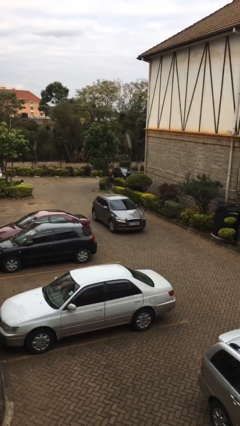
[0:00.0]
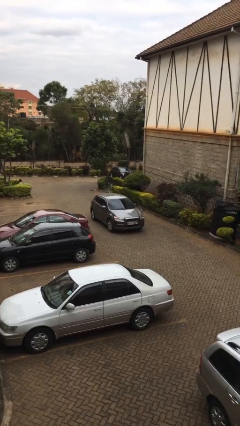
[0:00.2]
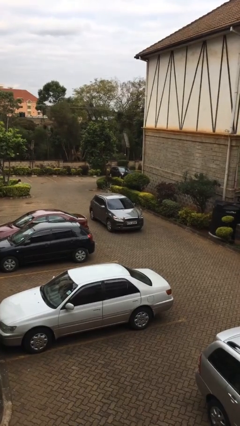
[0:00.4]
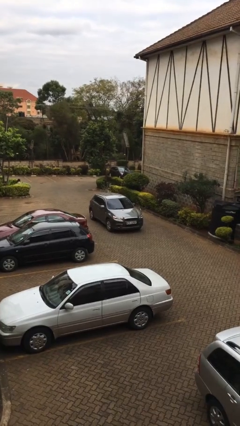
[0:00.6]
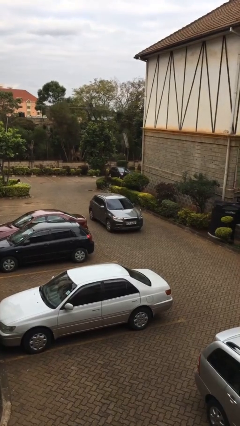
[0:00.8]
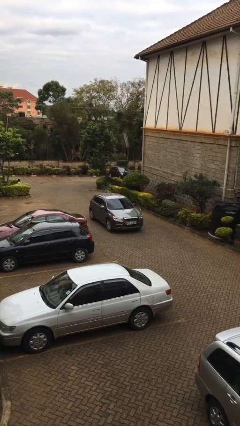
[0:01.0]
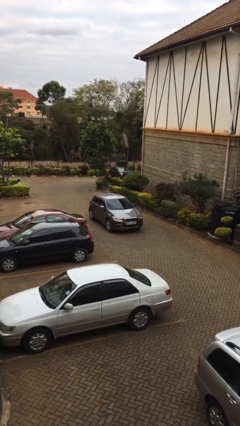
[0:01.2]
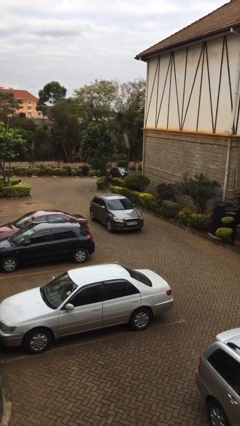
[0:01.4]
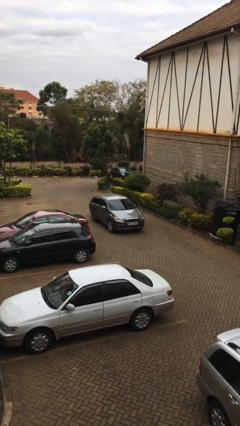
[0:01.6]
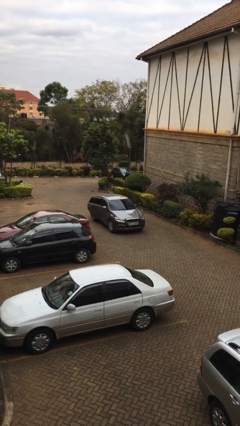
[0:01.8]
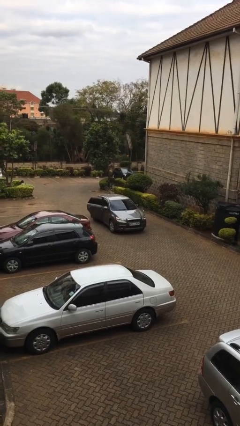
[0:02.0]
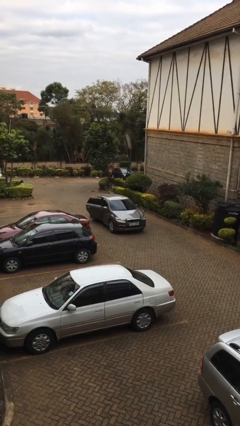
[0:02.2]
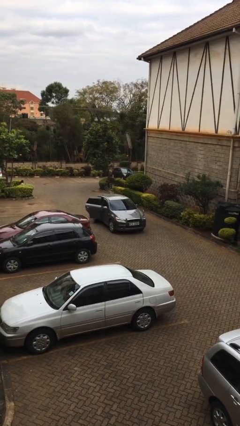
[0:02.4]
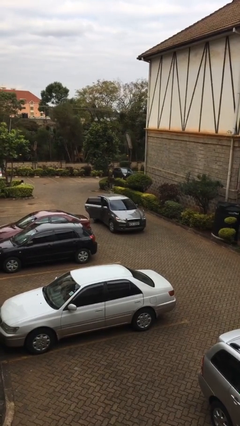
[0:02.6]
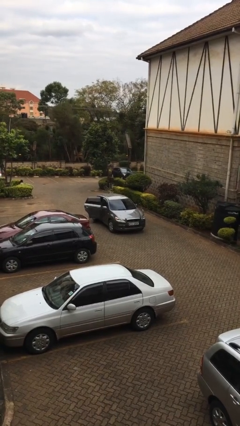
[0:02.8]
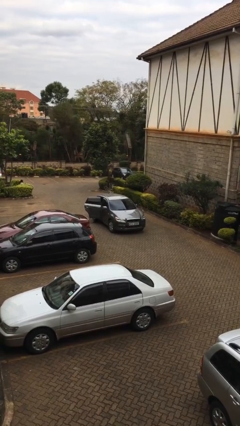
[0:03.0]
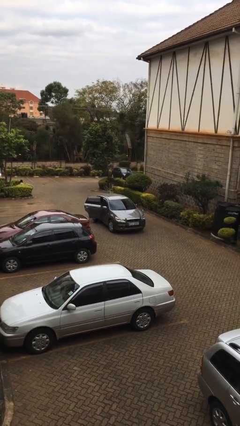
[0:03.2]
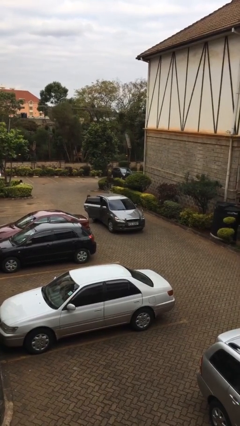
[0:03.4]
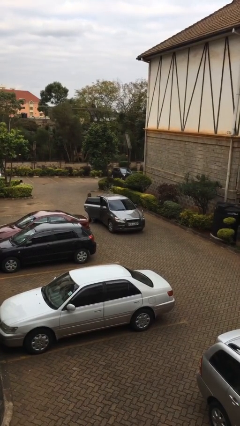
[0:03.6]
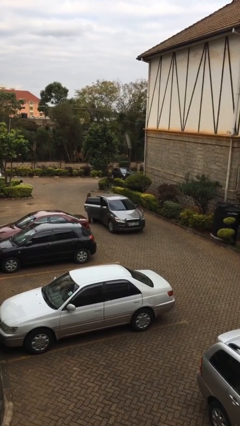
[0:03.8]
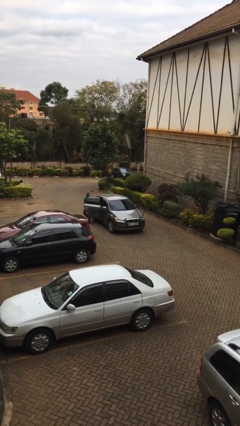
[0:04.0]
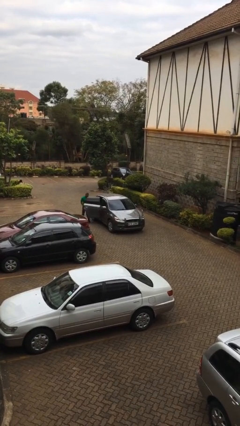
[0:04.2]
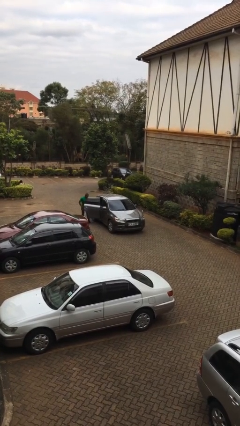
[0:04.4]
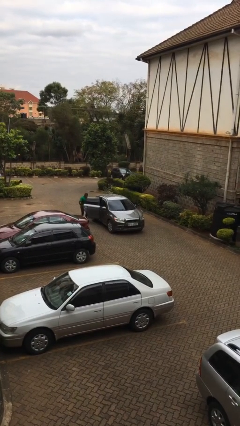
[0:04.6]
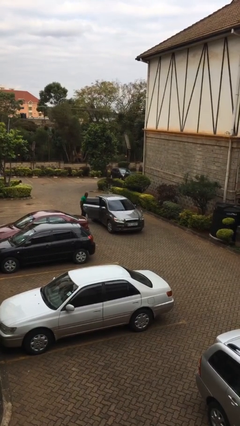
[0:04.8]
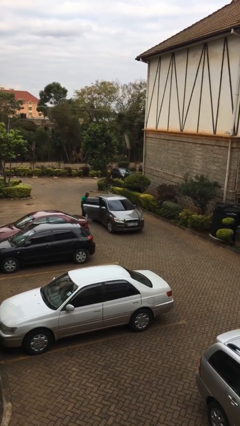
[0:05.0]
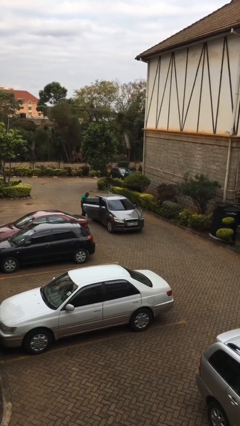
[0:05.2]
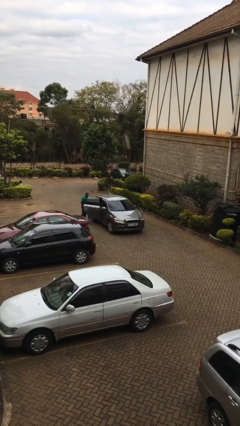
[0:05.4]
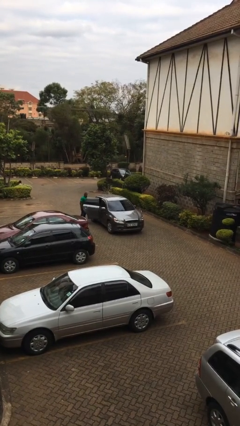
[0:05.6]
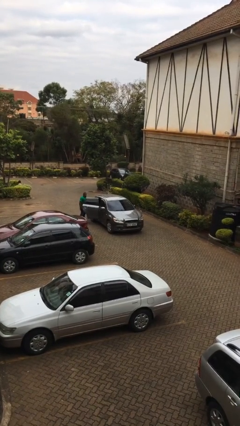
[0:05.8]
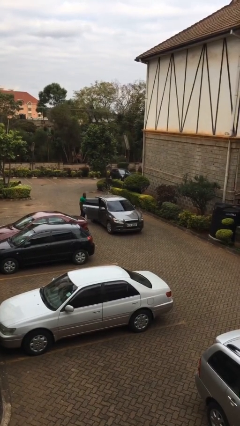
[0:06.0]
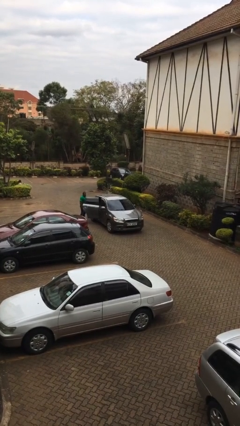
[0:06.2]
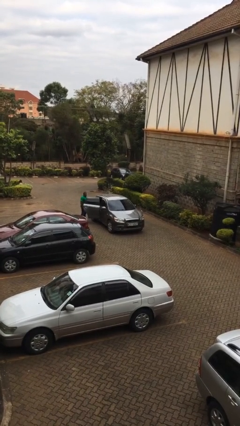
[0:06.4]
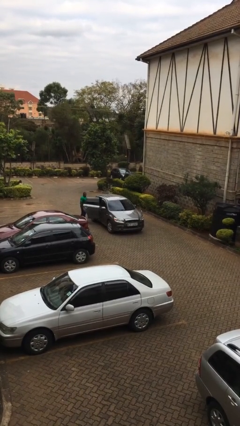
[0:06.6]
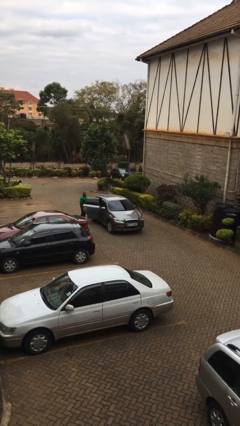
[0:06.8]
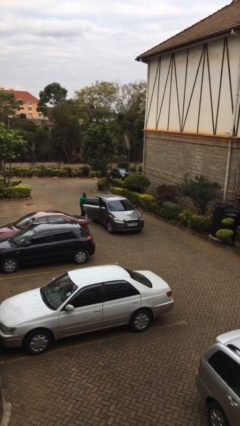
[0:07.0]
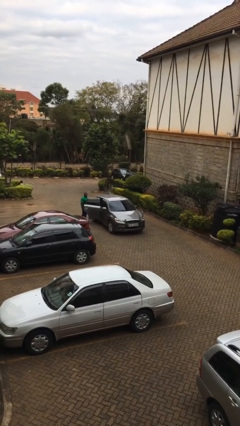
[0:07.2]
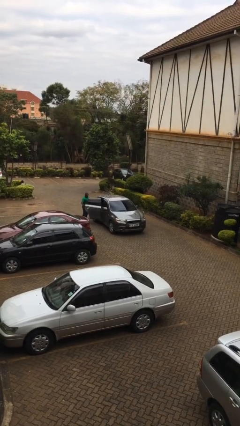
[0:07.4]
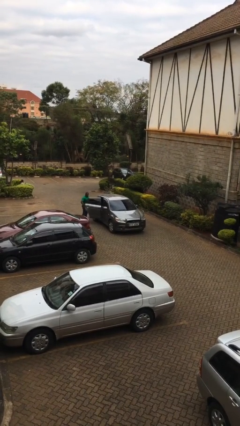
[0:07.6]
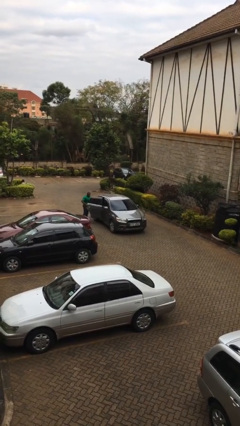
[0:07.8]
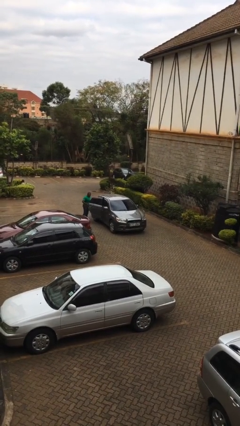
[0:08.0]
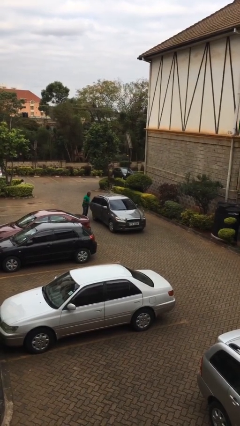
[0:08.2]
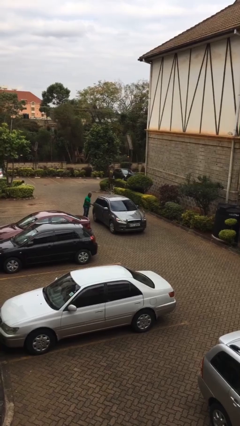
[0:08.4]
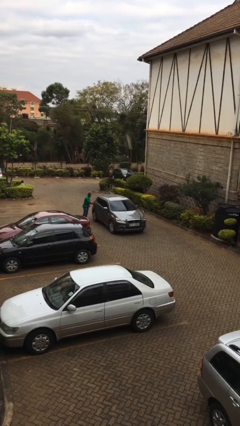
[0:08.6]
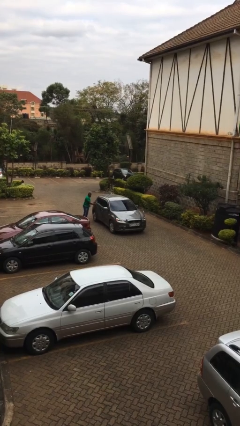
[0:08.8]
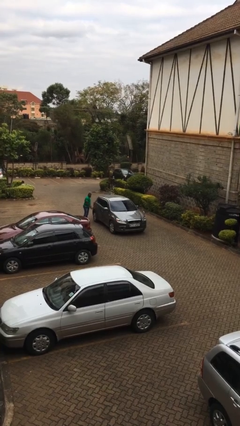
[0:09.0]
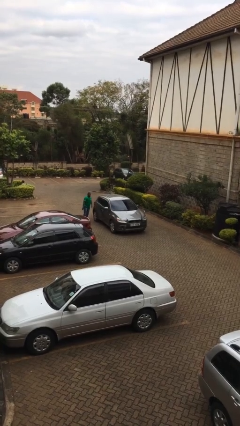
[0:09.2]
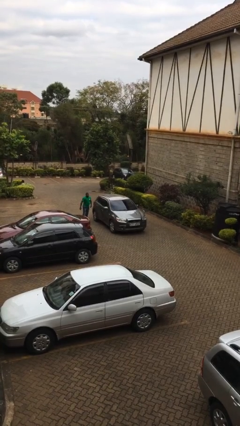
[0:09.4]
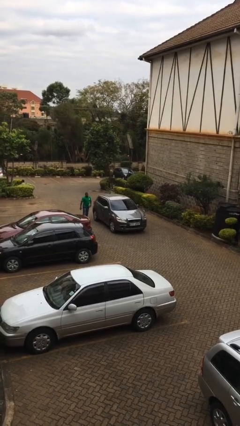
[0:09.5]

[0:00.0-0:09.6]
car drops off person

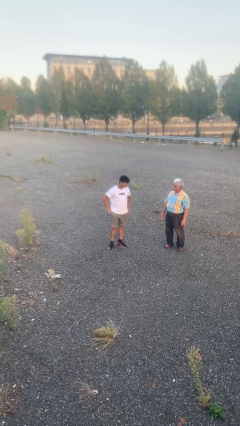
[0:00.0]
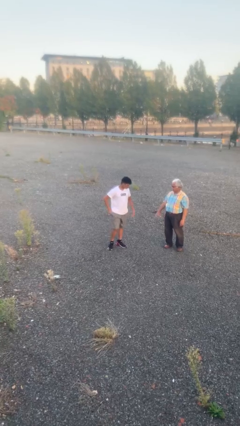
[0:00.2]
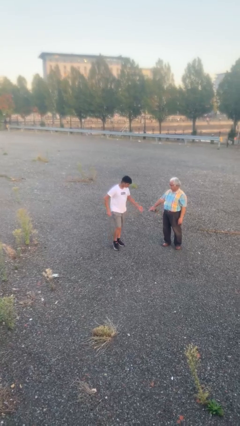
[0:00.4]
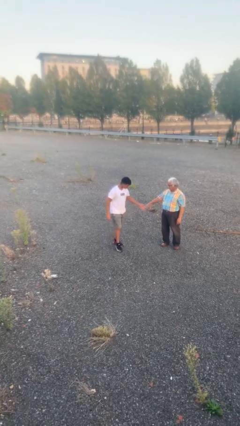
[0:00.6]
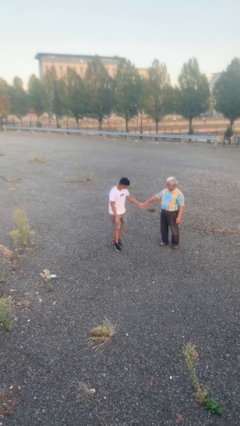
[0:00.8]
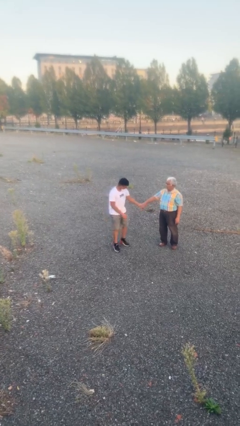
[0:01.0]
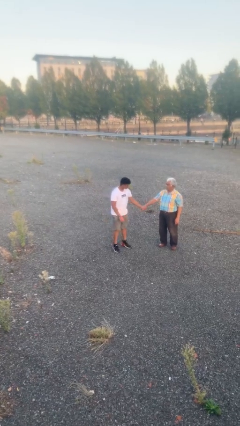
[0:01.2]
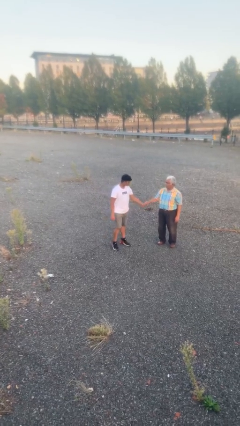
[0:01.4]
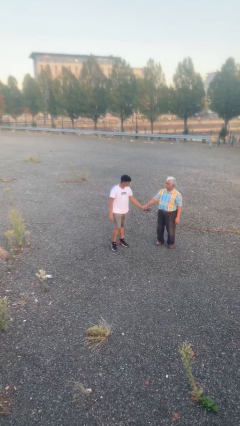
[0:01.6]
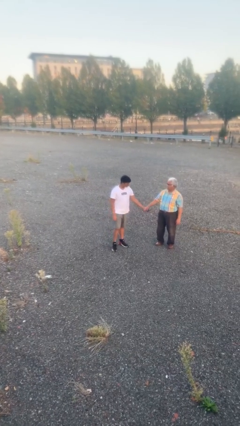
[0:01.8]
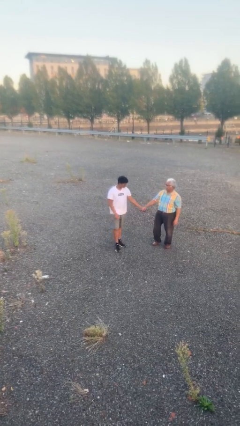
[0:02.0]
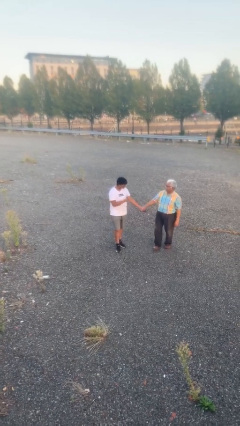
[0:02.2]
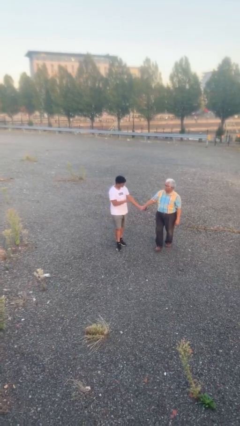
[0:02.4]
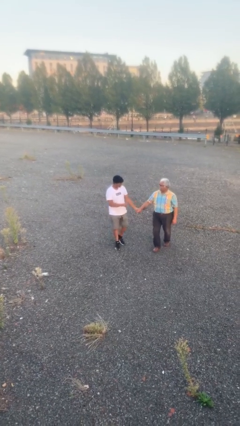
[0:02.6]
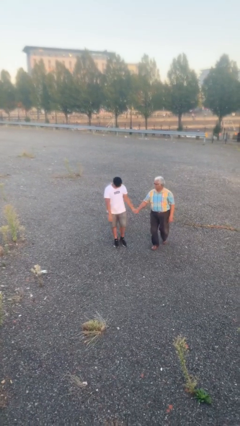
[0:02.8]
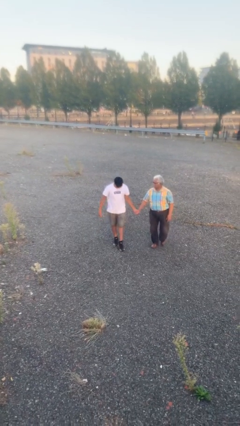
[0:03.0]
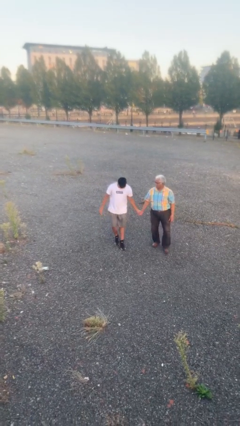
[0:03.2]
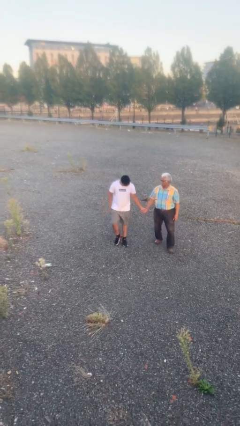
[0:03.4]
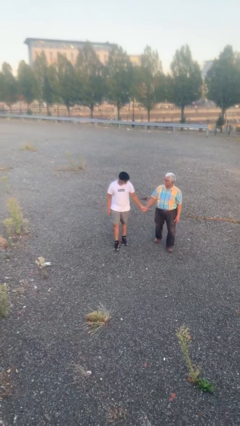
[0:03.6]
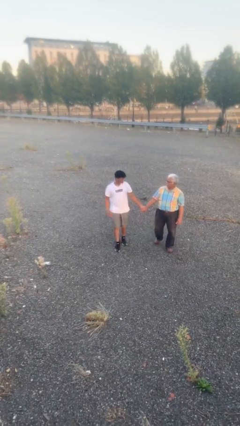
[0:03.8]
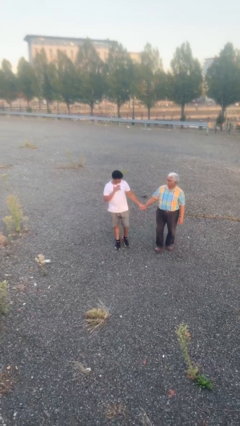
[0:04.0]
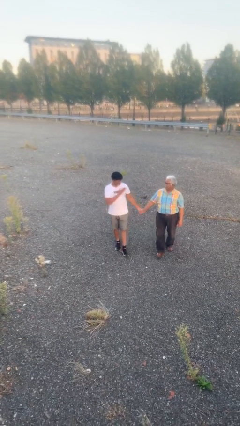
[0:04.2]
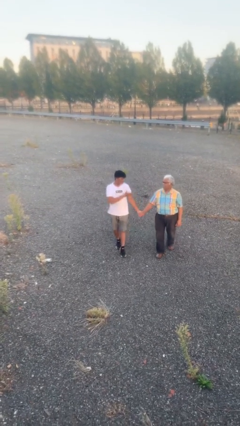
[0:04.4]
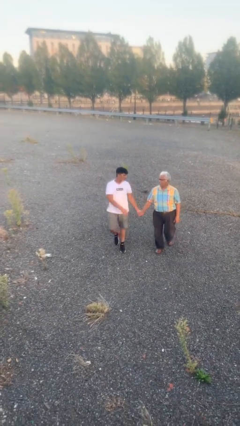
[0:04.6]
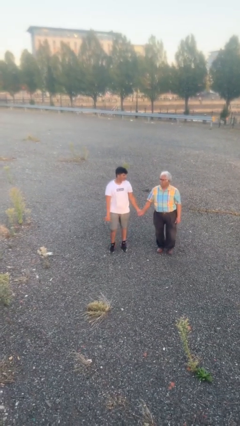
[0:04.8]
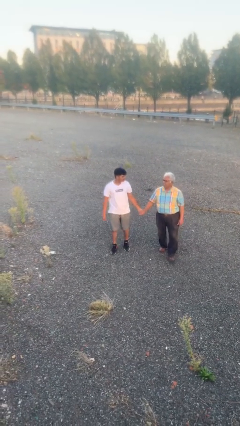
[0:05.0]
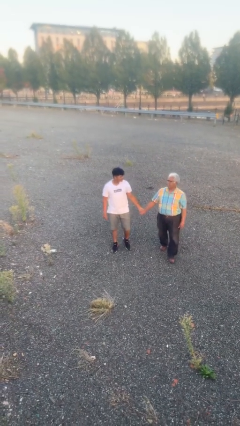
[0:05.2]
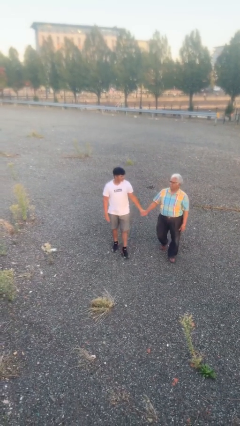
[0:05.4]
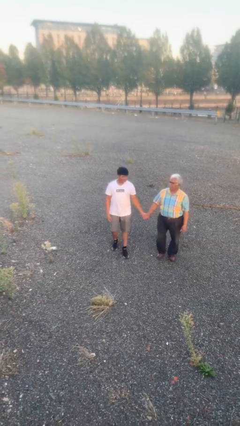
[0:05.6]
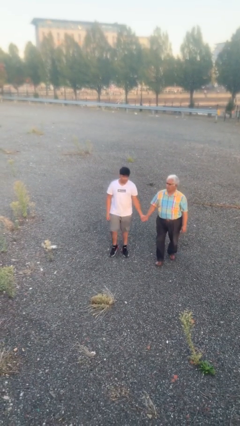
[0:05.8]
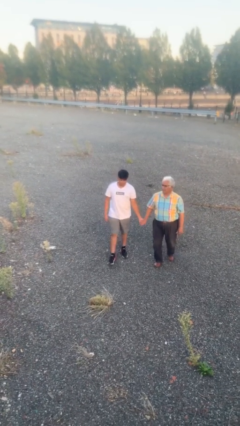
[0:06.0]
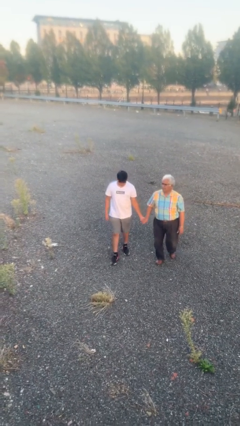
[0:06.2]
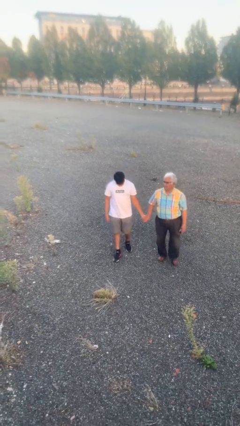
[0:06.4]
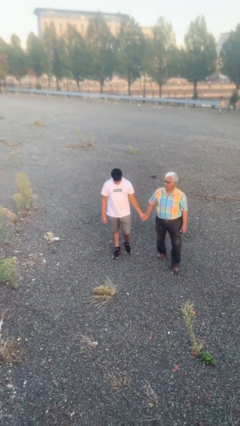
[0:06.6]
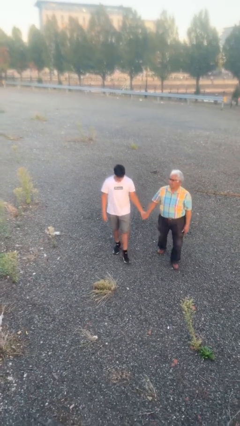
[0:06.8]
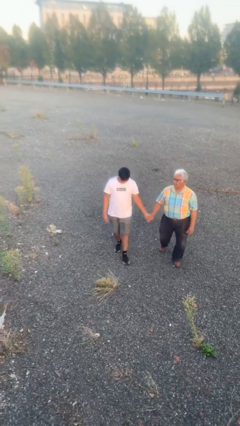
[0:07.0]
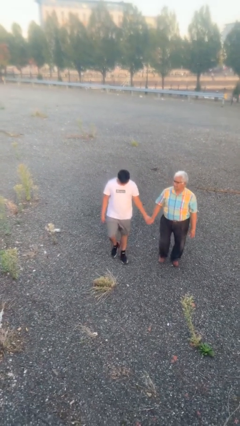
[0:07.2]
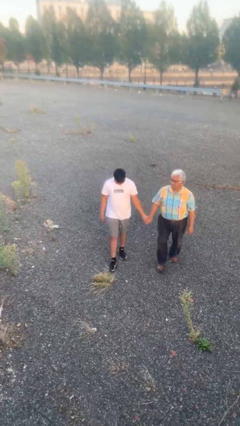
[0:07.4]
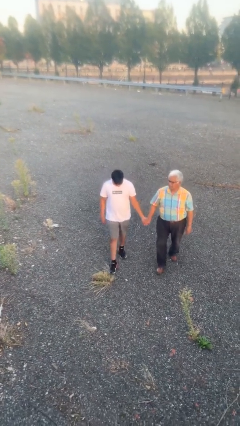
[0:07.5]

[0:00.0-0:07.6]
person holds hand

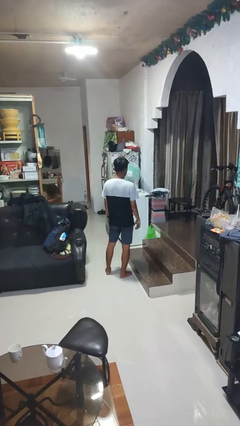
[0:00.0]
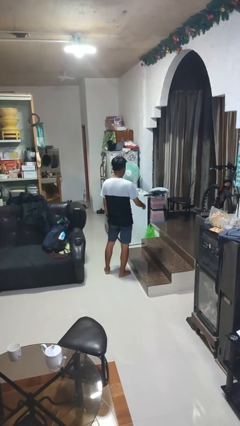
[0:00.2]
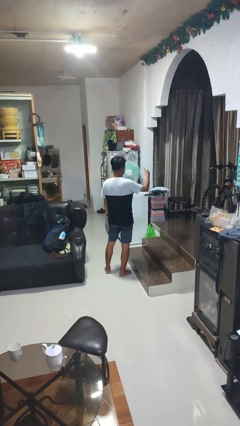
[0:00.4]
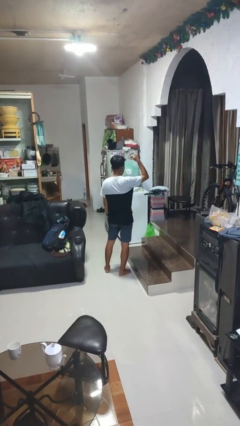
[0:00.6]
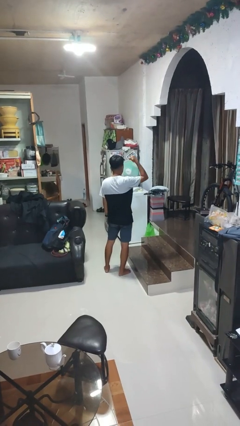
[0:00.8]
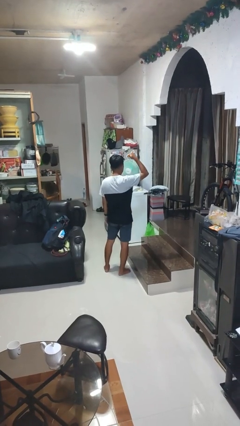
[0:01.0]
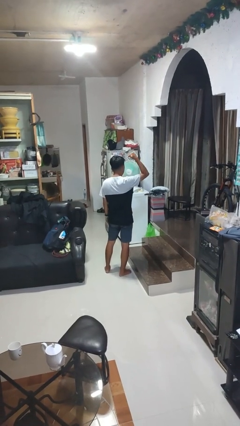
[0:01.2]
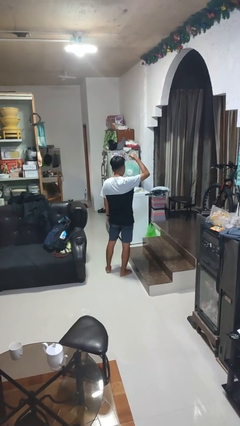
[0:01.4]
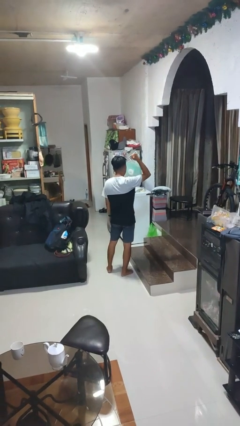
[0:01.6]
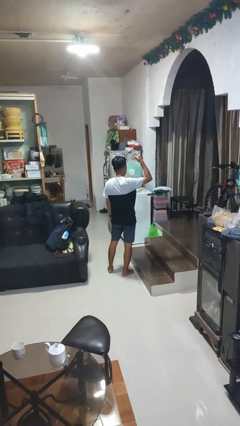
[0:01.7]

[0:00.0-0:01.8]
person gestures behind me
